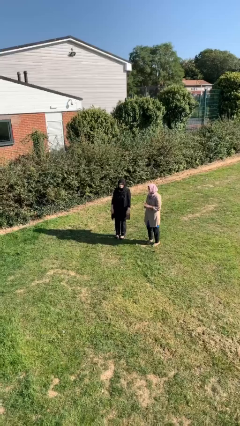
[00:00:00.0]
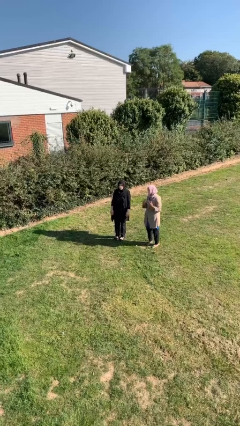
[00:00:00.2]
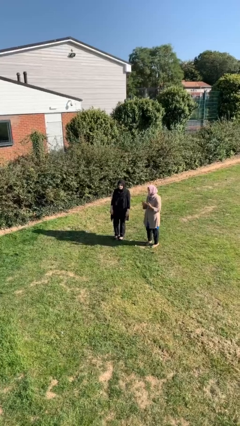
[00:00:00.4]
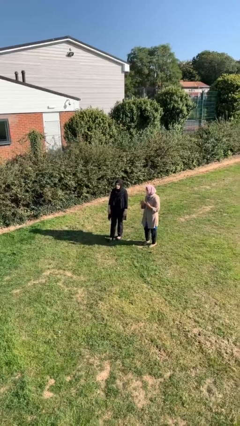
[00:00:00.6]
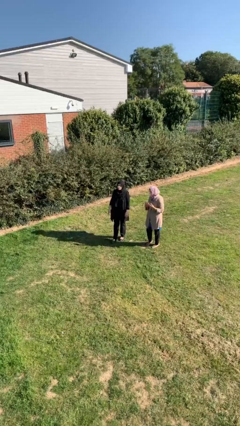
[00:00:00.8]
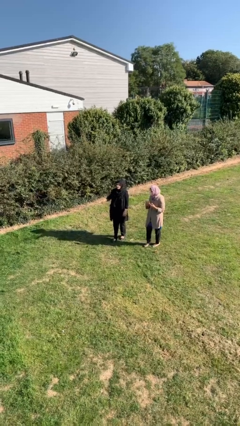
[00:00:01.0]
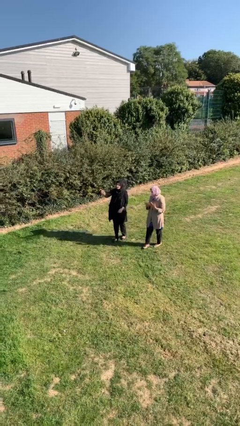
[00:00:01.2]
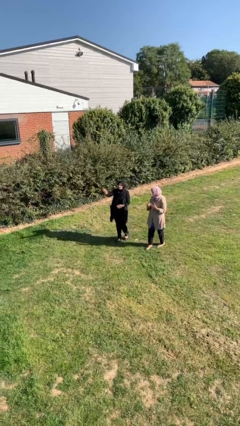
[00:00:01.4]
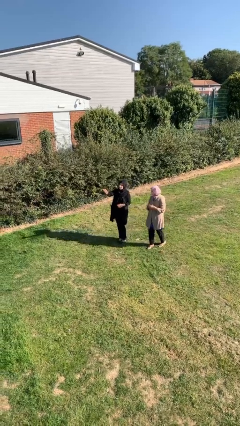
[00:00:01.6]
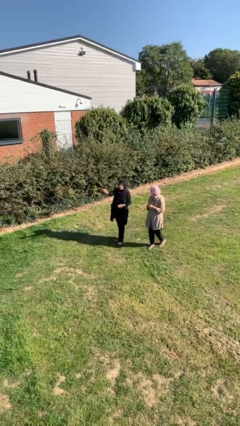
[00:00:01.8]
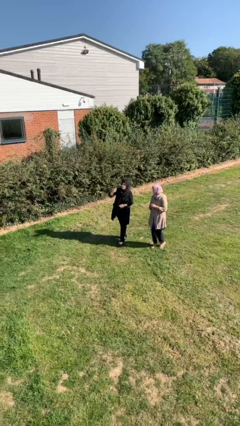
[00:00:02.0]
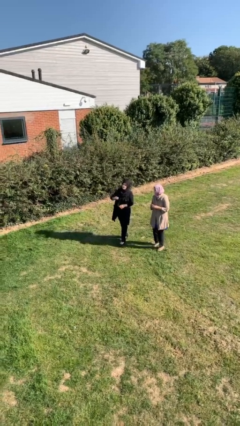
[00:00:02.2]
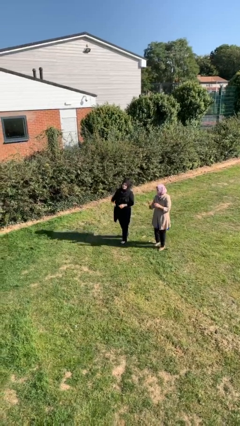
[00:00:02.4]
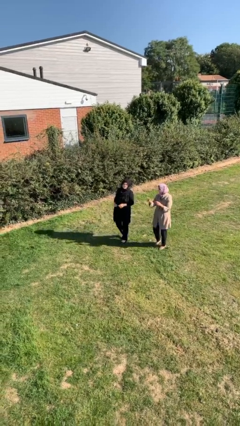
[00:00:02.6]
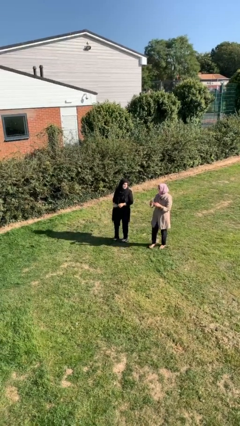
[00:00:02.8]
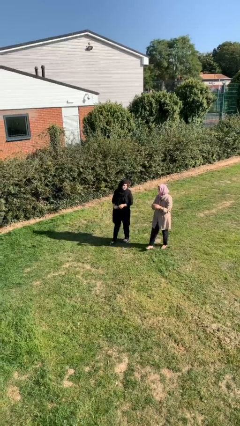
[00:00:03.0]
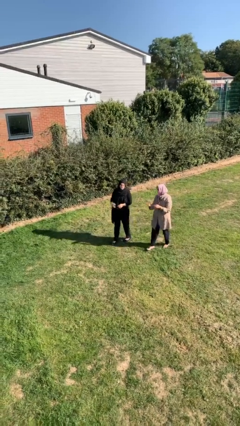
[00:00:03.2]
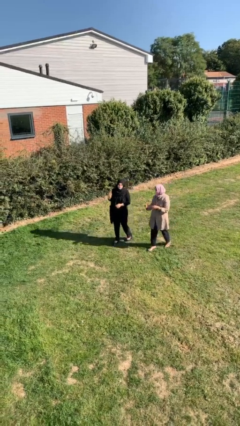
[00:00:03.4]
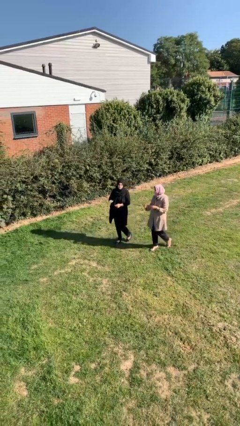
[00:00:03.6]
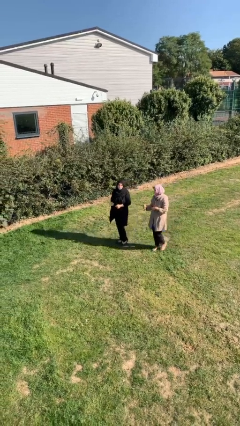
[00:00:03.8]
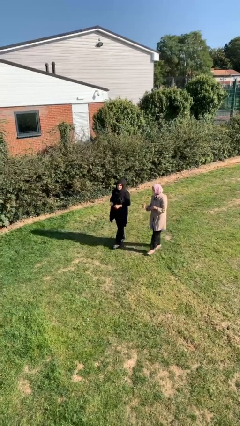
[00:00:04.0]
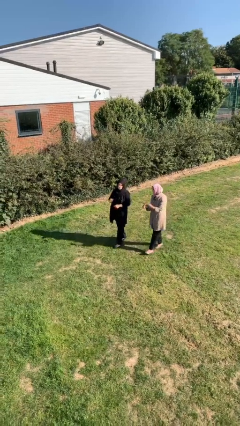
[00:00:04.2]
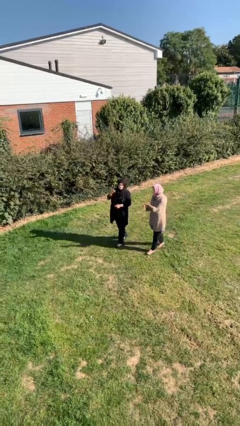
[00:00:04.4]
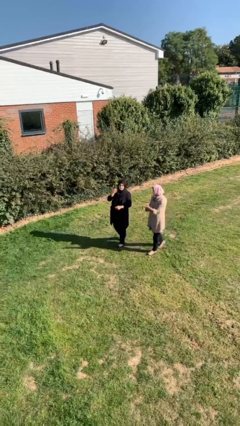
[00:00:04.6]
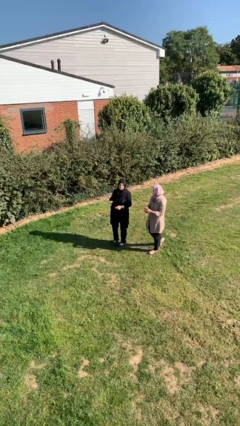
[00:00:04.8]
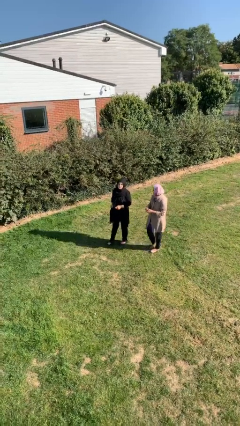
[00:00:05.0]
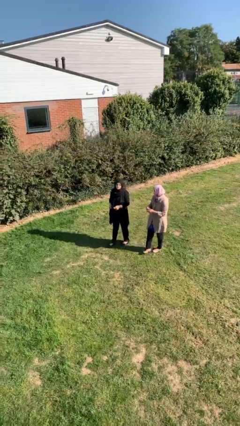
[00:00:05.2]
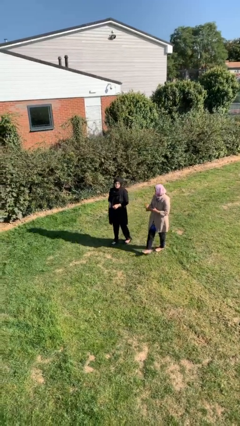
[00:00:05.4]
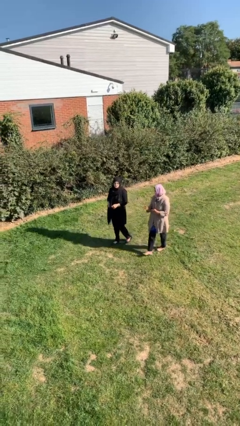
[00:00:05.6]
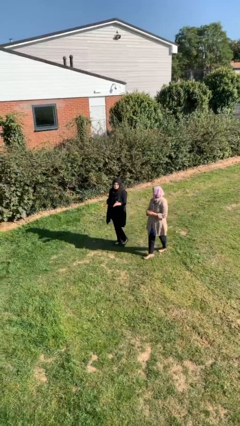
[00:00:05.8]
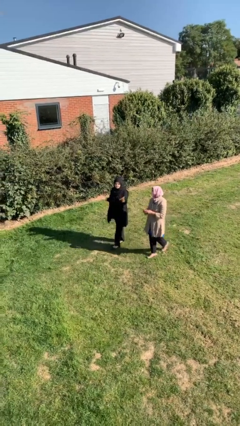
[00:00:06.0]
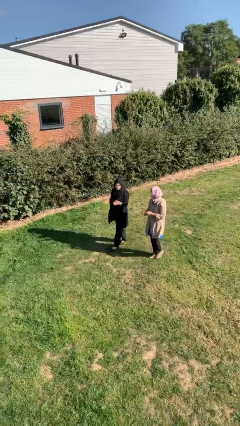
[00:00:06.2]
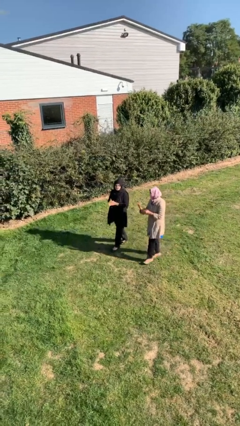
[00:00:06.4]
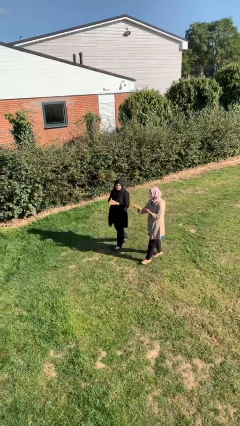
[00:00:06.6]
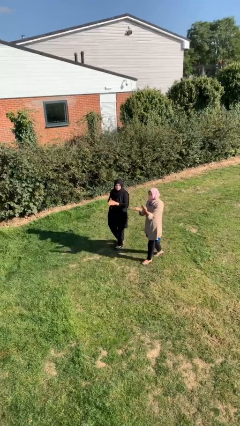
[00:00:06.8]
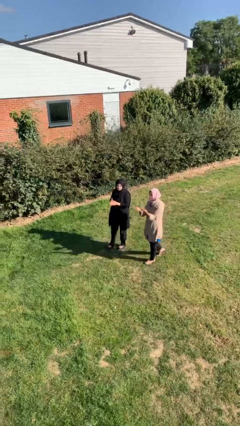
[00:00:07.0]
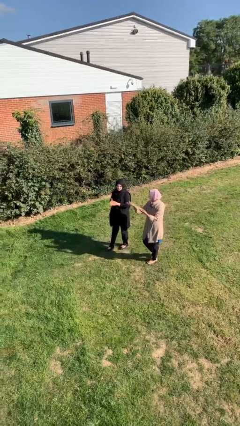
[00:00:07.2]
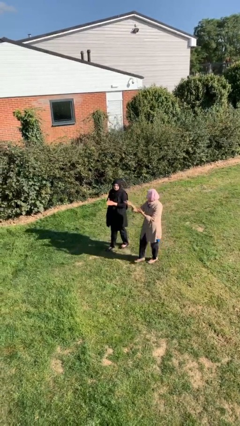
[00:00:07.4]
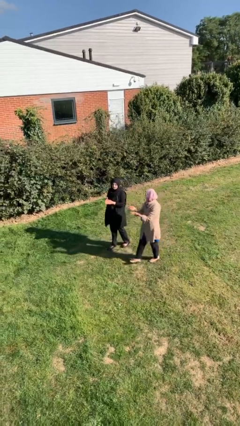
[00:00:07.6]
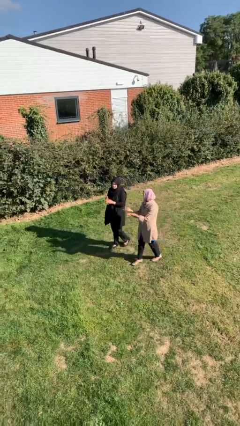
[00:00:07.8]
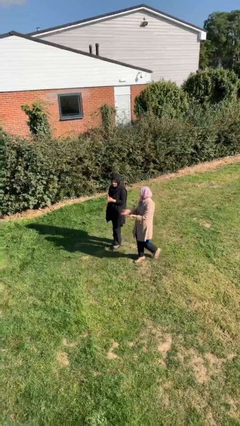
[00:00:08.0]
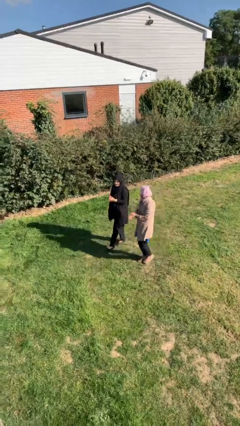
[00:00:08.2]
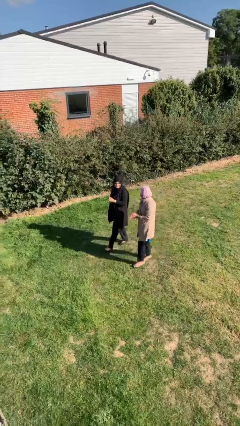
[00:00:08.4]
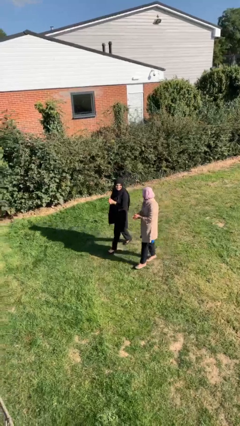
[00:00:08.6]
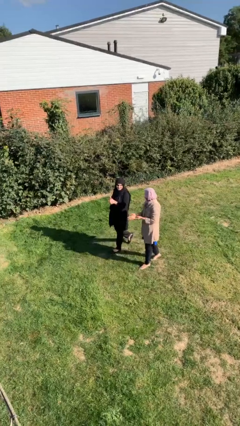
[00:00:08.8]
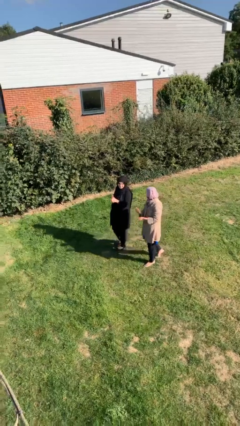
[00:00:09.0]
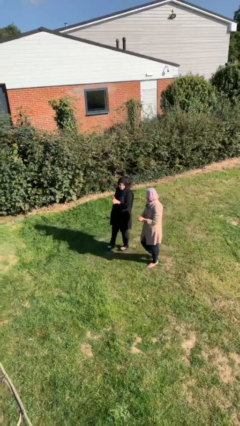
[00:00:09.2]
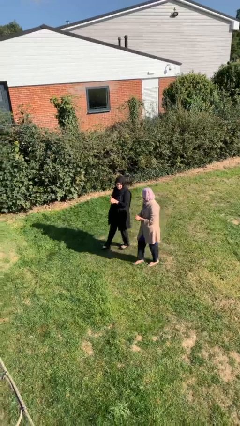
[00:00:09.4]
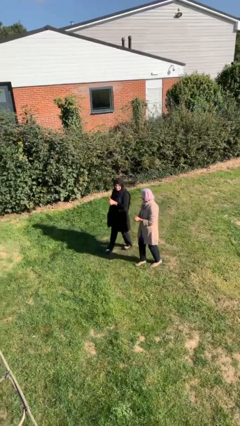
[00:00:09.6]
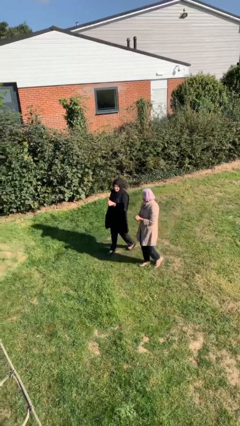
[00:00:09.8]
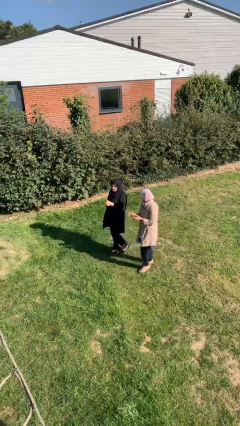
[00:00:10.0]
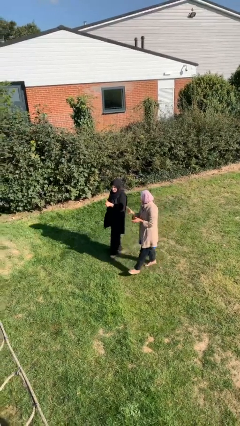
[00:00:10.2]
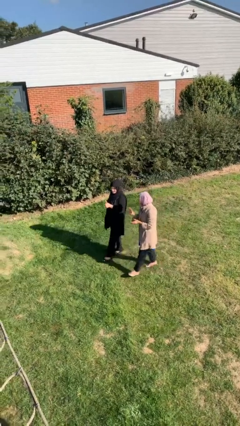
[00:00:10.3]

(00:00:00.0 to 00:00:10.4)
person talks to person

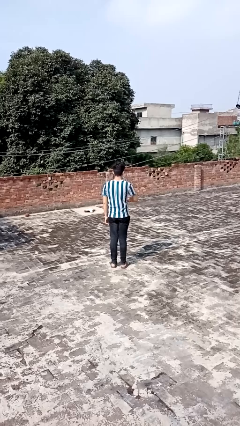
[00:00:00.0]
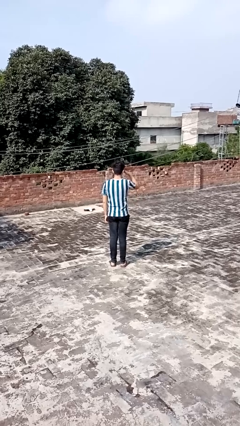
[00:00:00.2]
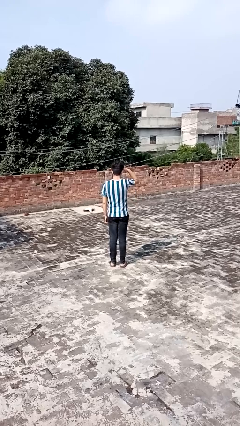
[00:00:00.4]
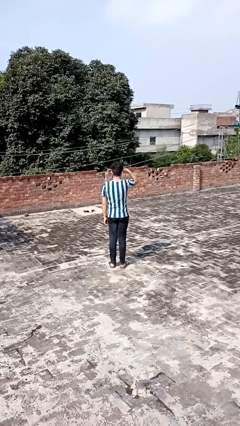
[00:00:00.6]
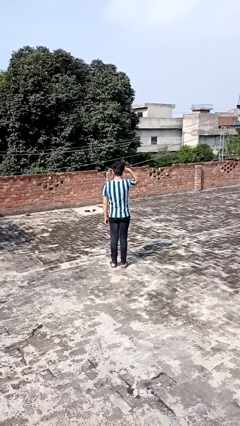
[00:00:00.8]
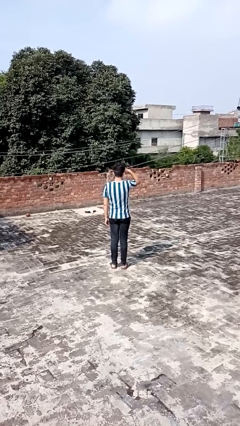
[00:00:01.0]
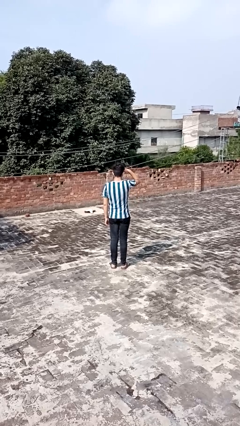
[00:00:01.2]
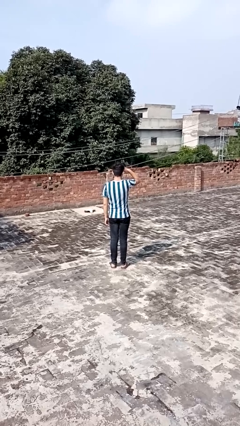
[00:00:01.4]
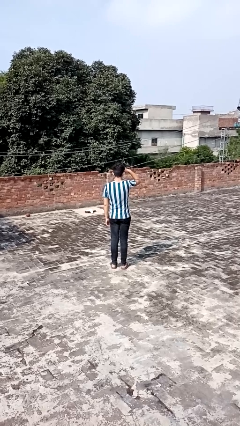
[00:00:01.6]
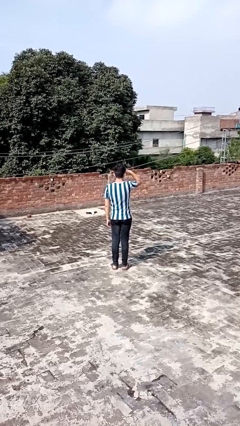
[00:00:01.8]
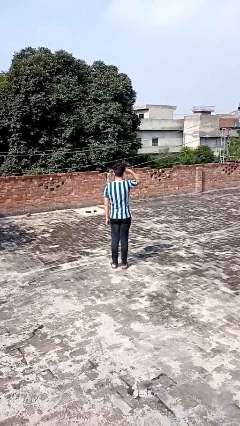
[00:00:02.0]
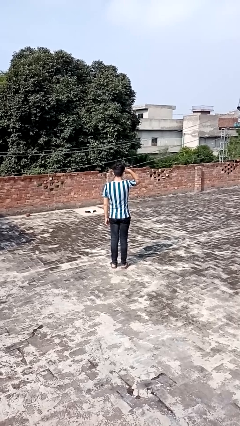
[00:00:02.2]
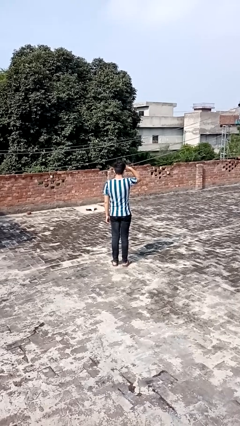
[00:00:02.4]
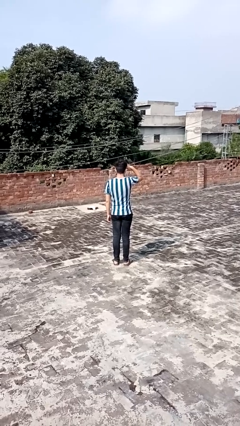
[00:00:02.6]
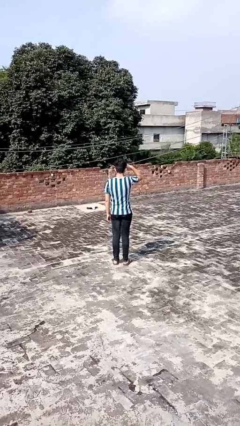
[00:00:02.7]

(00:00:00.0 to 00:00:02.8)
person salutes

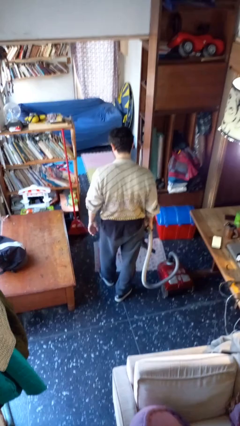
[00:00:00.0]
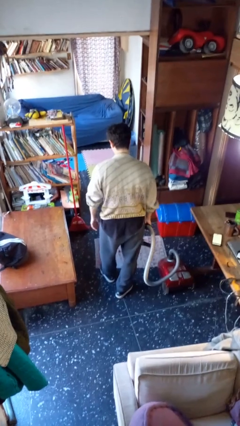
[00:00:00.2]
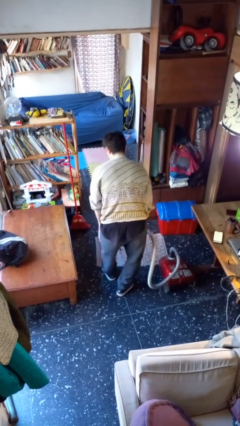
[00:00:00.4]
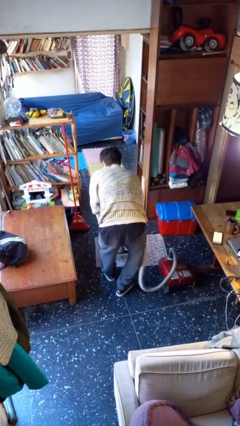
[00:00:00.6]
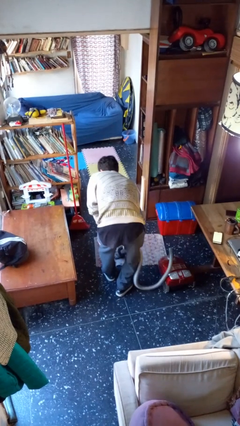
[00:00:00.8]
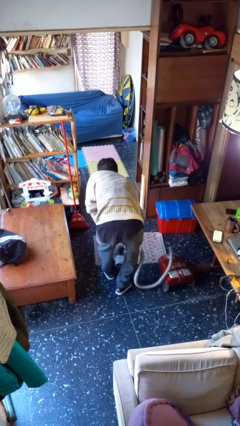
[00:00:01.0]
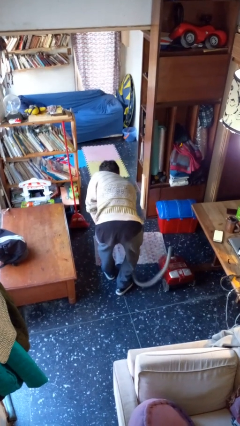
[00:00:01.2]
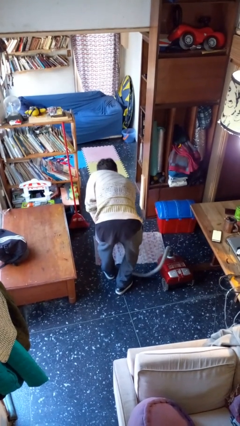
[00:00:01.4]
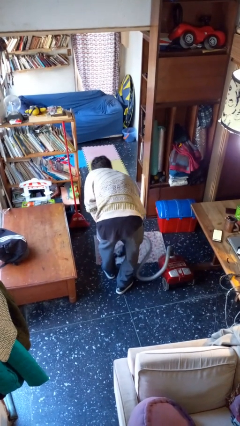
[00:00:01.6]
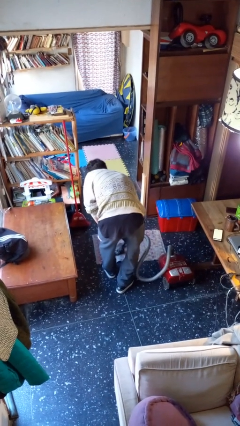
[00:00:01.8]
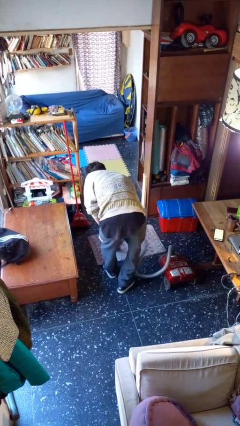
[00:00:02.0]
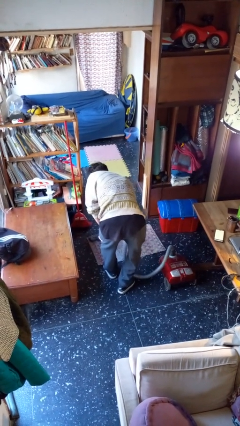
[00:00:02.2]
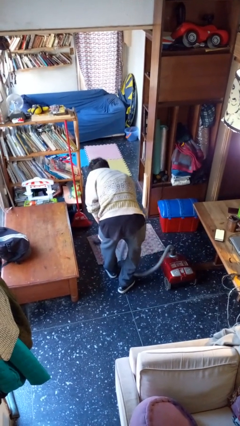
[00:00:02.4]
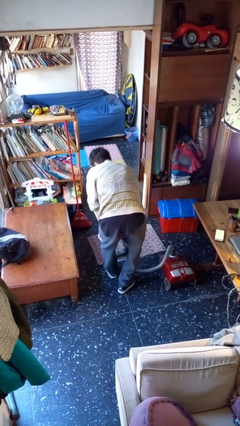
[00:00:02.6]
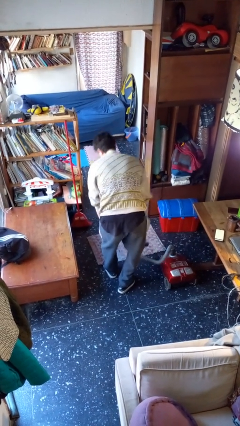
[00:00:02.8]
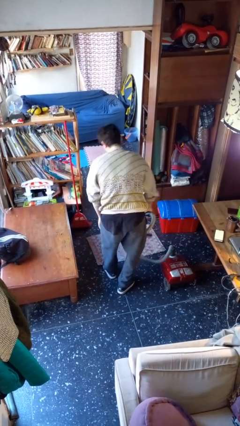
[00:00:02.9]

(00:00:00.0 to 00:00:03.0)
person vacuums carpet

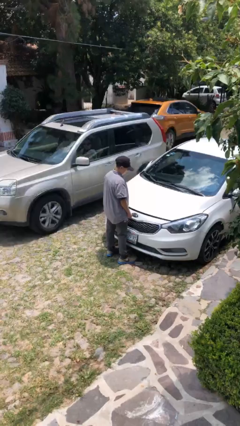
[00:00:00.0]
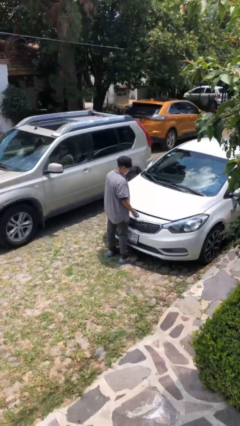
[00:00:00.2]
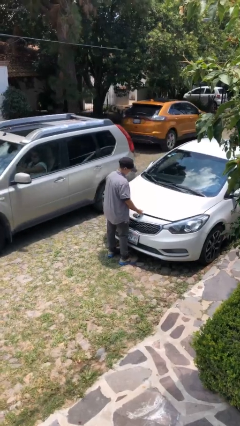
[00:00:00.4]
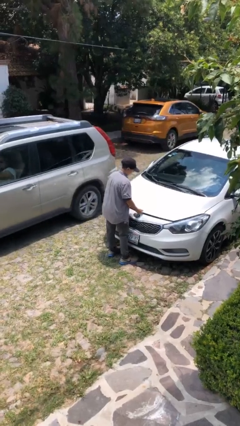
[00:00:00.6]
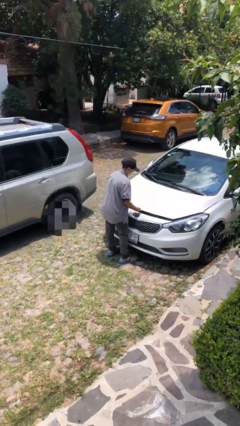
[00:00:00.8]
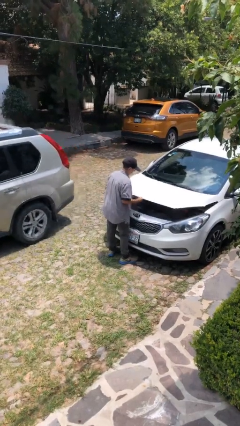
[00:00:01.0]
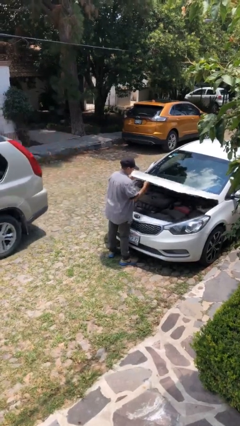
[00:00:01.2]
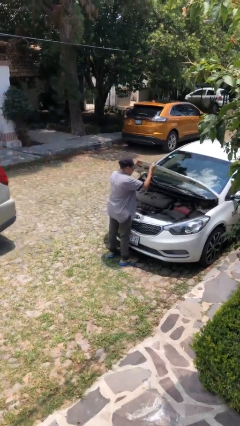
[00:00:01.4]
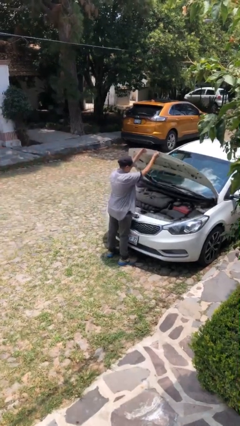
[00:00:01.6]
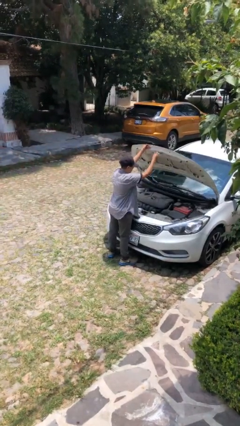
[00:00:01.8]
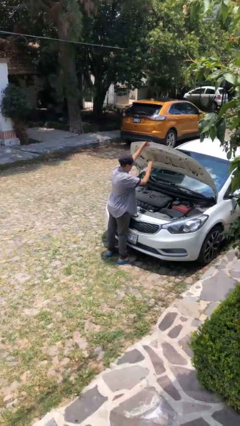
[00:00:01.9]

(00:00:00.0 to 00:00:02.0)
person opens car hood
